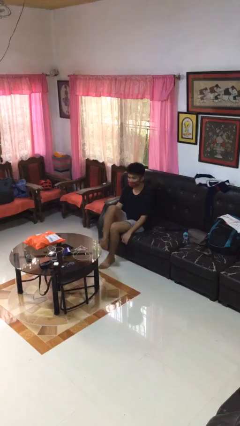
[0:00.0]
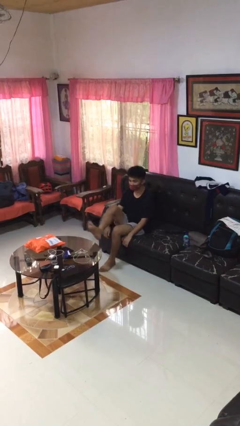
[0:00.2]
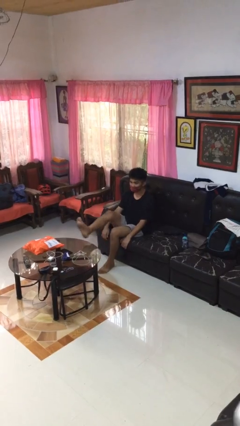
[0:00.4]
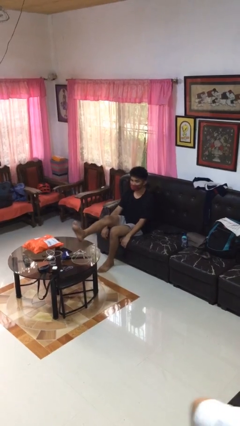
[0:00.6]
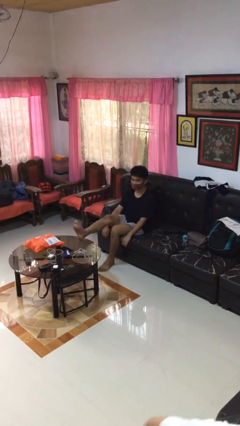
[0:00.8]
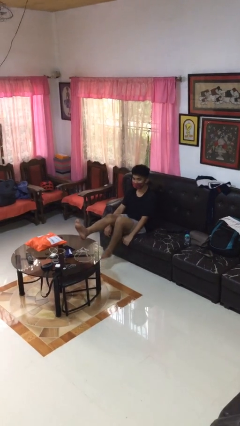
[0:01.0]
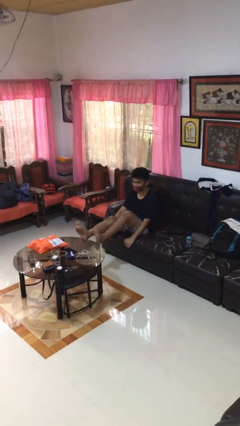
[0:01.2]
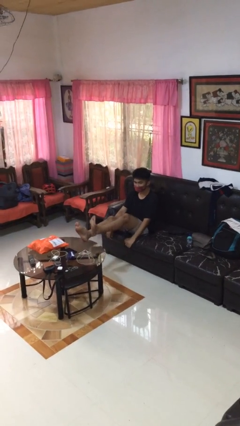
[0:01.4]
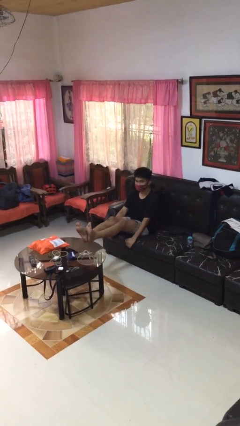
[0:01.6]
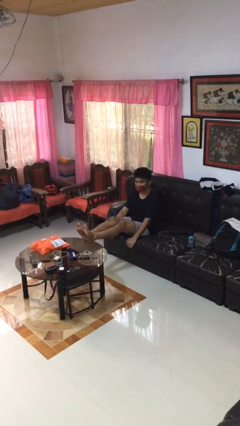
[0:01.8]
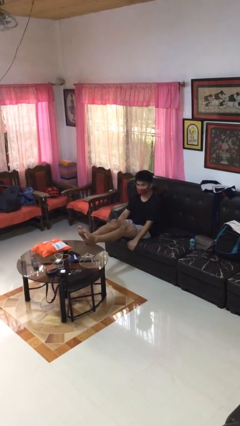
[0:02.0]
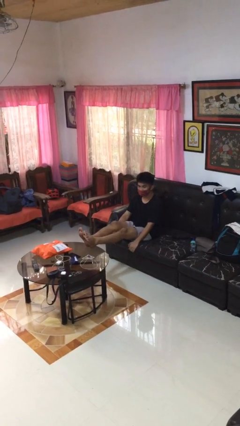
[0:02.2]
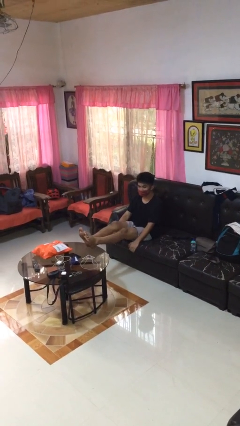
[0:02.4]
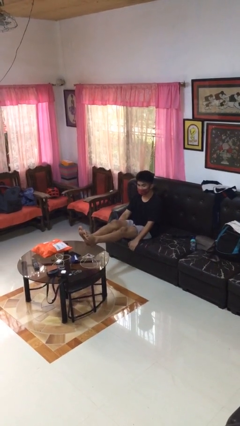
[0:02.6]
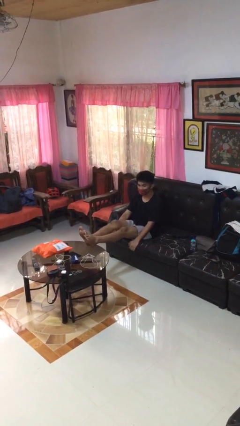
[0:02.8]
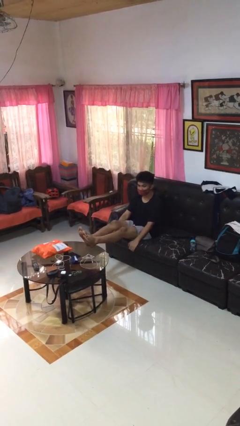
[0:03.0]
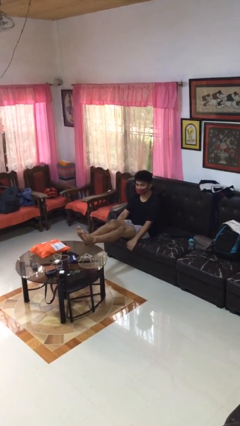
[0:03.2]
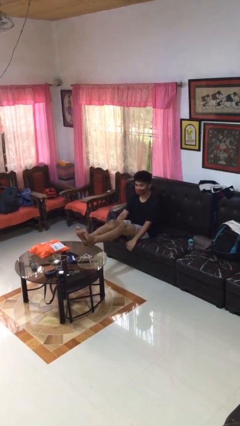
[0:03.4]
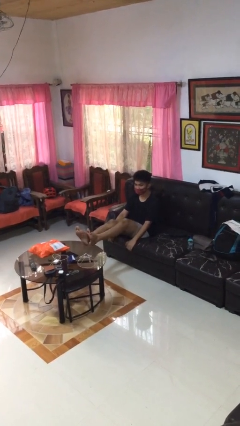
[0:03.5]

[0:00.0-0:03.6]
person puts feet up

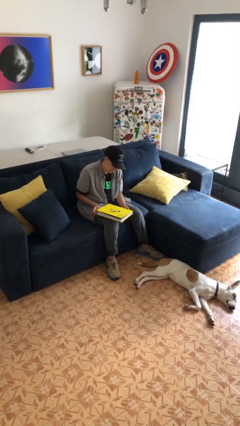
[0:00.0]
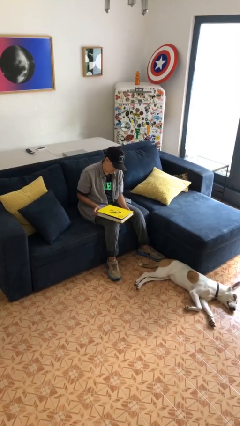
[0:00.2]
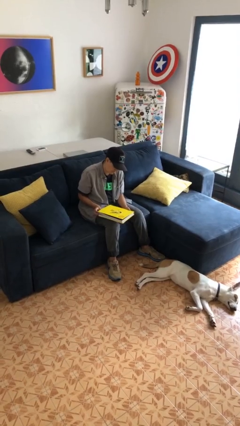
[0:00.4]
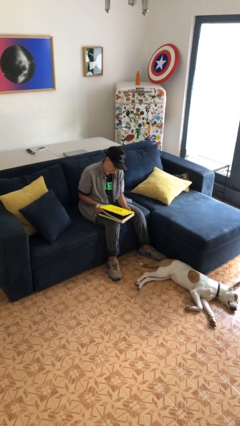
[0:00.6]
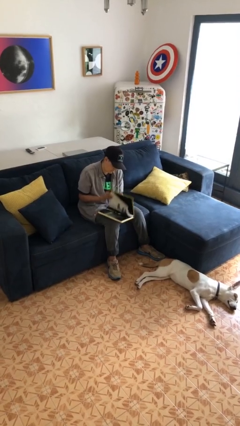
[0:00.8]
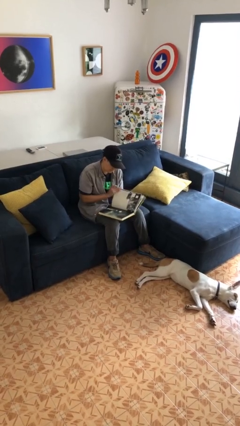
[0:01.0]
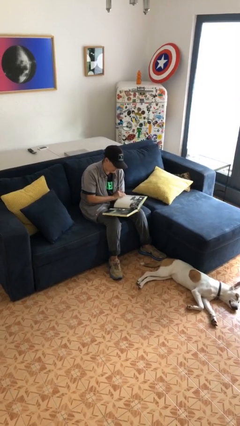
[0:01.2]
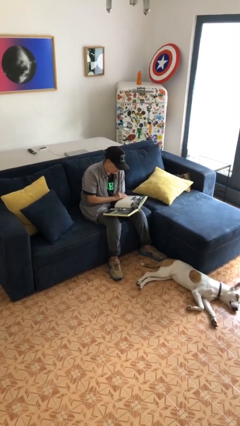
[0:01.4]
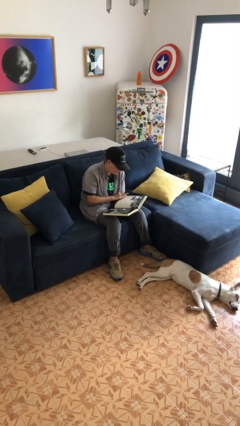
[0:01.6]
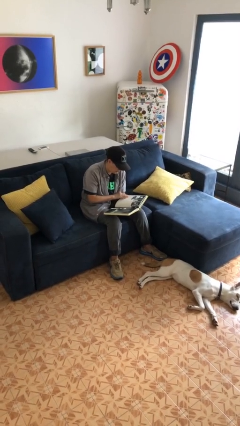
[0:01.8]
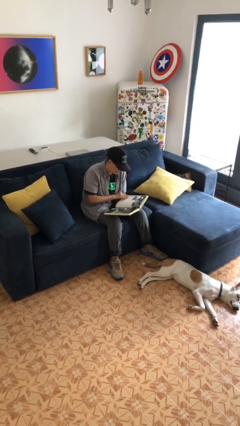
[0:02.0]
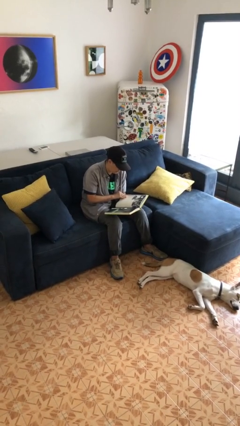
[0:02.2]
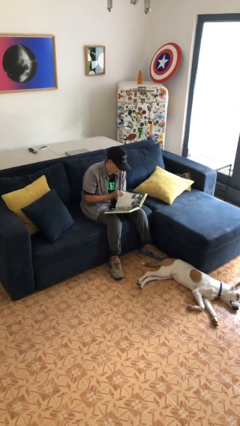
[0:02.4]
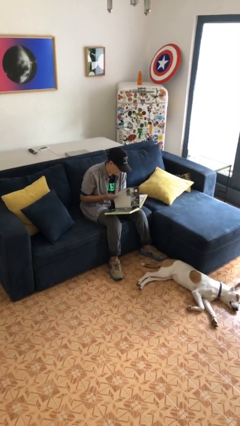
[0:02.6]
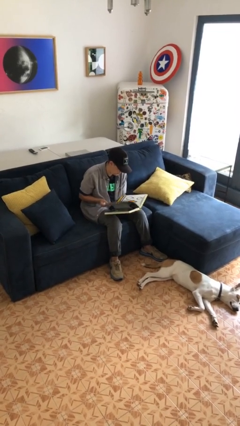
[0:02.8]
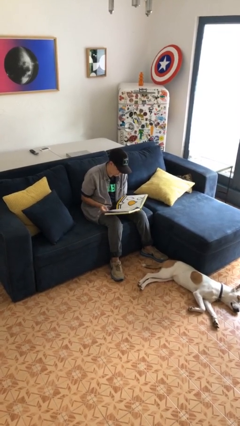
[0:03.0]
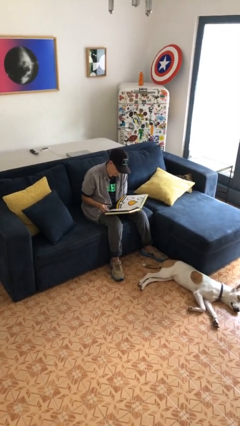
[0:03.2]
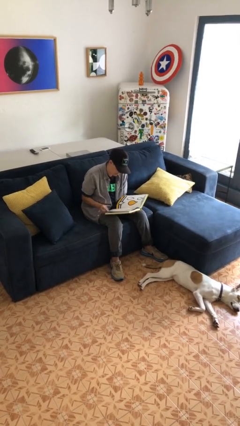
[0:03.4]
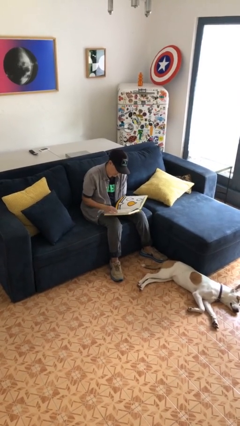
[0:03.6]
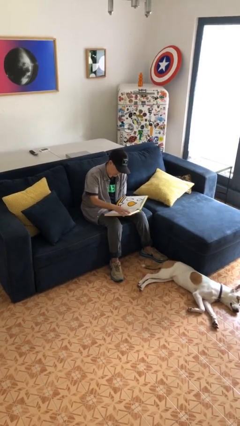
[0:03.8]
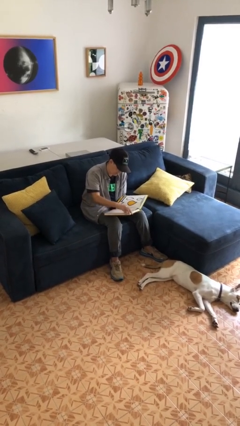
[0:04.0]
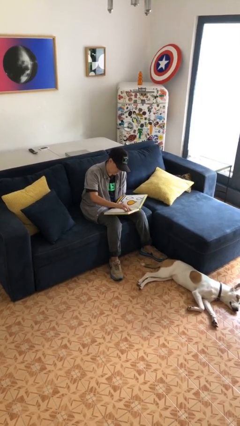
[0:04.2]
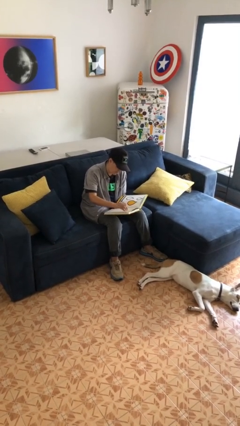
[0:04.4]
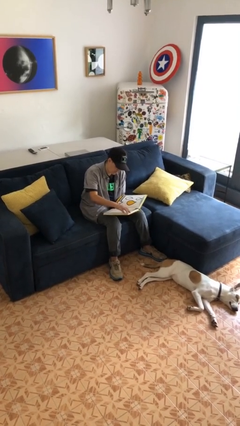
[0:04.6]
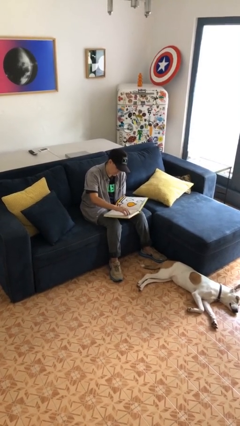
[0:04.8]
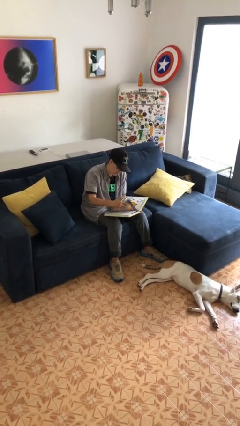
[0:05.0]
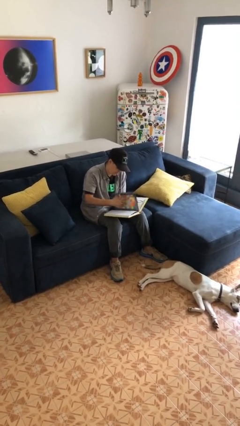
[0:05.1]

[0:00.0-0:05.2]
person reads book

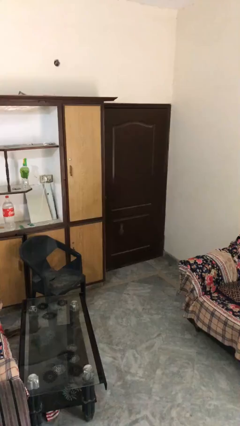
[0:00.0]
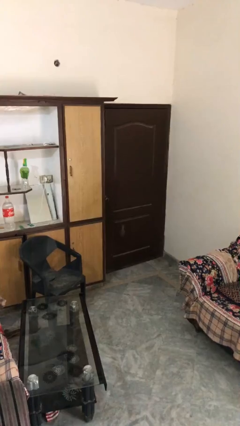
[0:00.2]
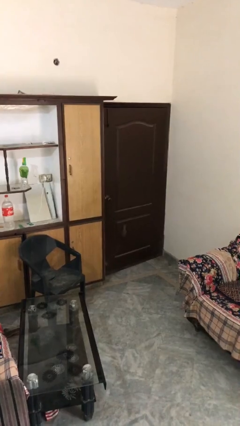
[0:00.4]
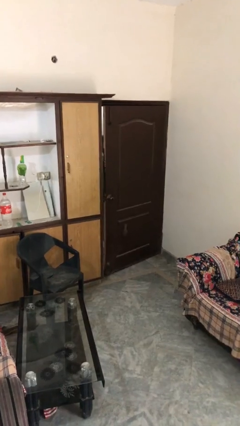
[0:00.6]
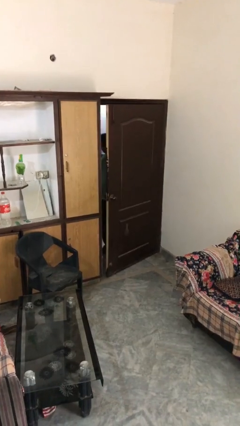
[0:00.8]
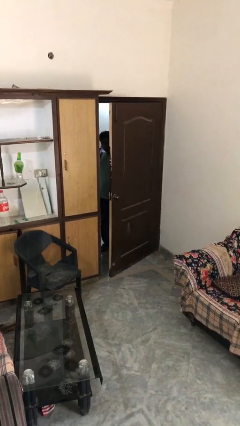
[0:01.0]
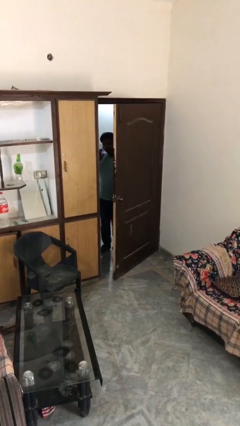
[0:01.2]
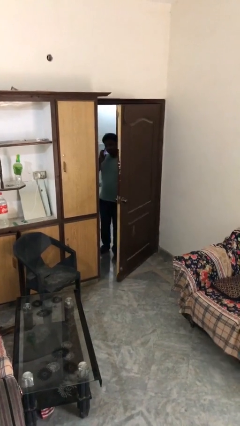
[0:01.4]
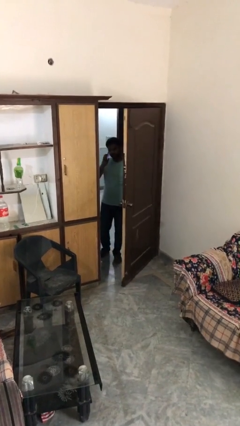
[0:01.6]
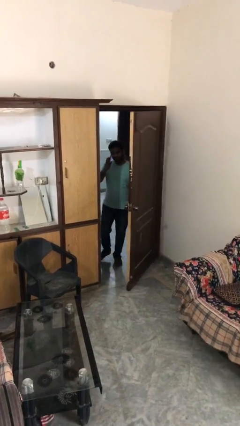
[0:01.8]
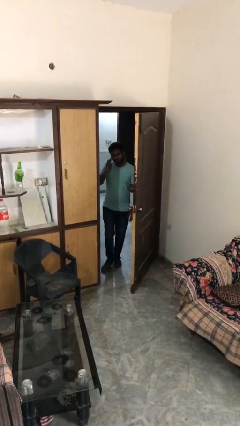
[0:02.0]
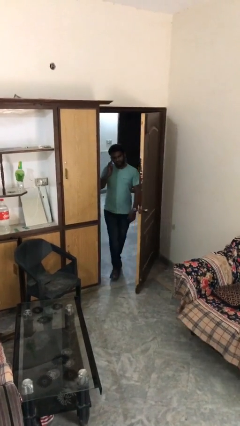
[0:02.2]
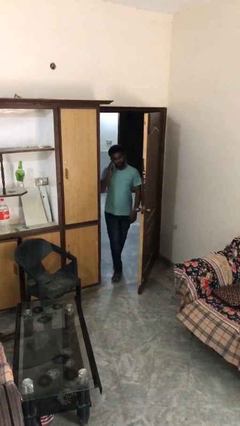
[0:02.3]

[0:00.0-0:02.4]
person opens facility door

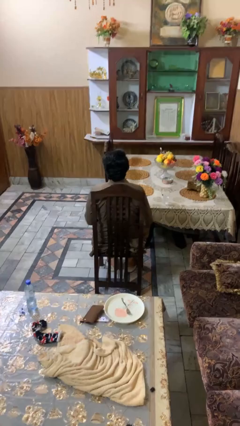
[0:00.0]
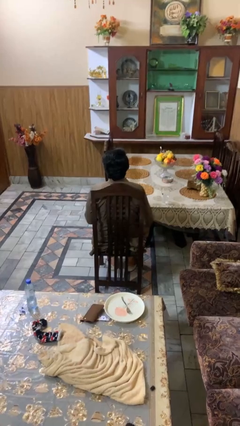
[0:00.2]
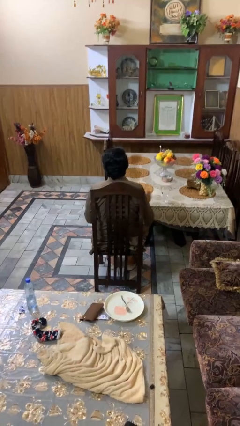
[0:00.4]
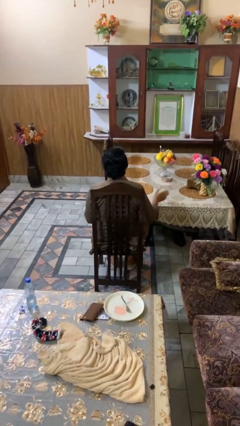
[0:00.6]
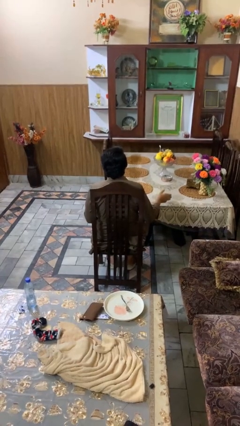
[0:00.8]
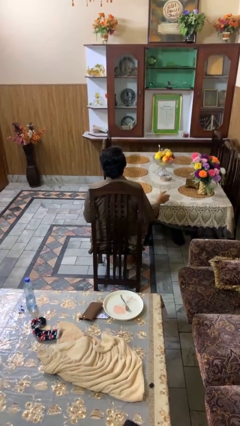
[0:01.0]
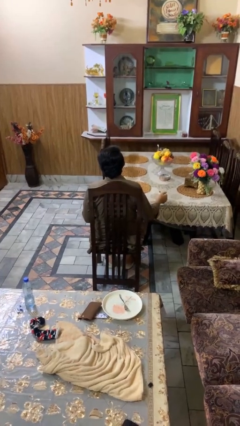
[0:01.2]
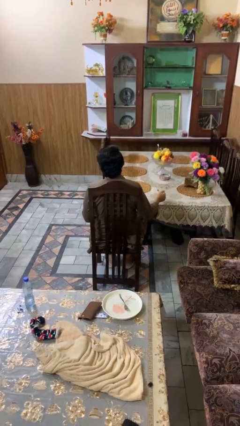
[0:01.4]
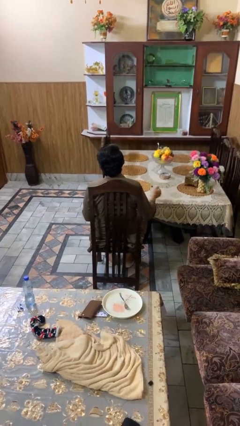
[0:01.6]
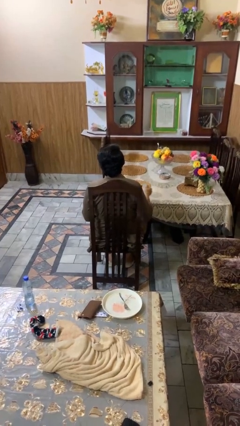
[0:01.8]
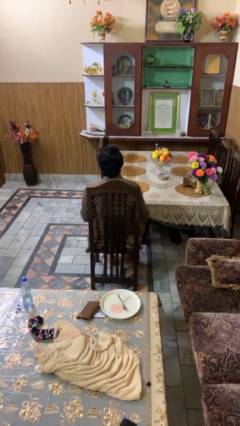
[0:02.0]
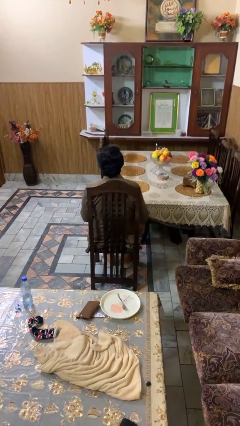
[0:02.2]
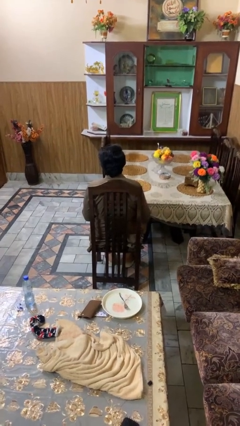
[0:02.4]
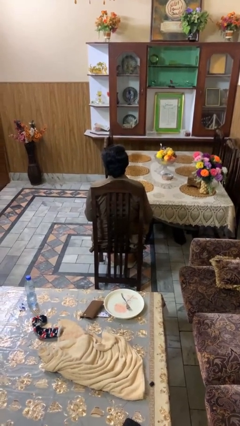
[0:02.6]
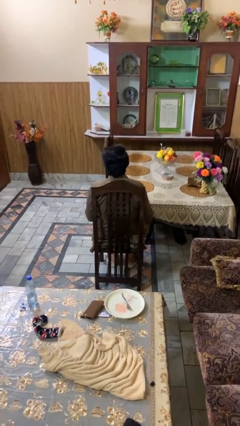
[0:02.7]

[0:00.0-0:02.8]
person picks up object from table

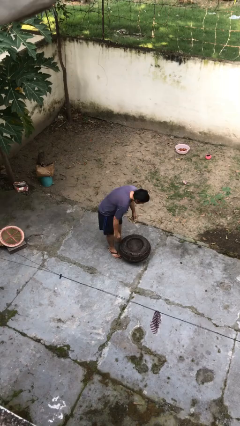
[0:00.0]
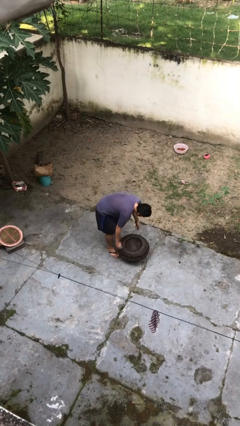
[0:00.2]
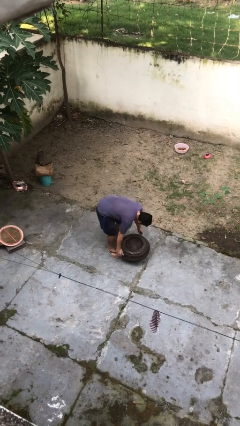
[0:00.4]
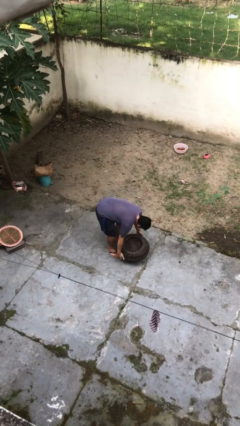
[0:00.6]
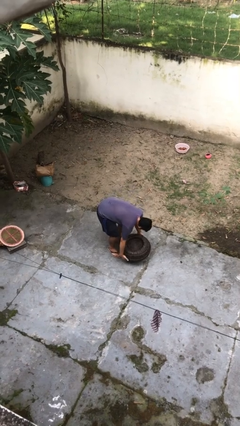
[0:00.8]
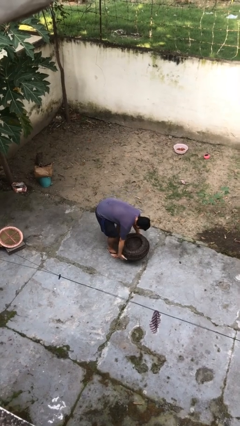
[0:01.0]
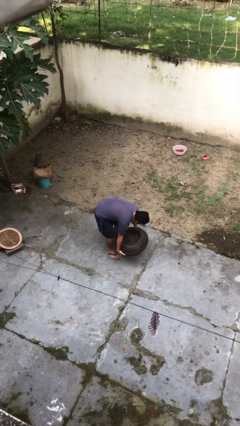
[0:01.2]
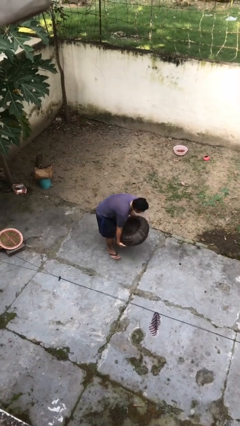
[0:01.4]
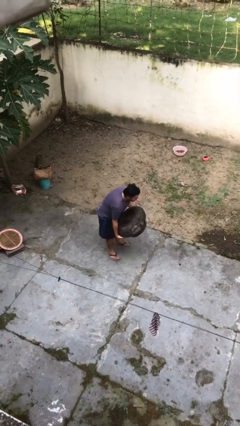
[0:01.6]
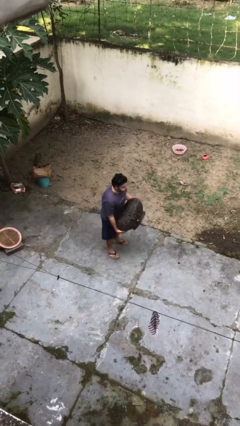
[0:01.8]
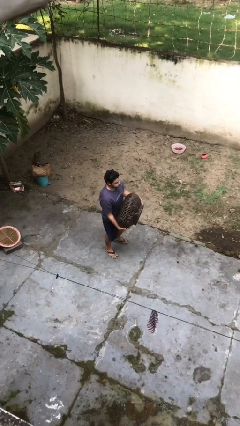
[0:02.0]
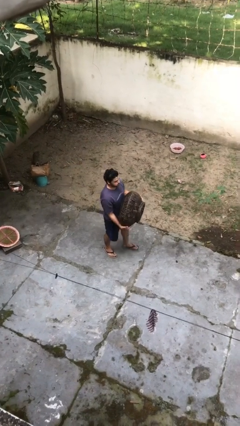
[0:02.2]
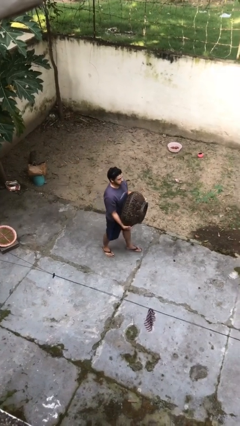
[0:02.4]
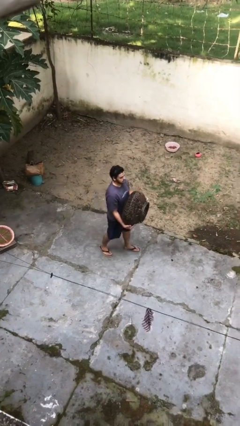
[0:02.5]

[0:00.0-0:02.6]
person picks up object from floor

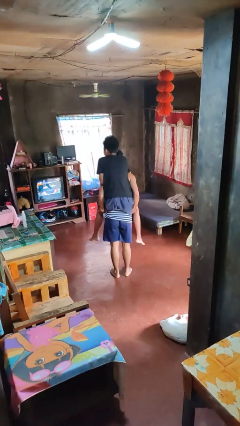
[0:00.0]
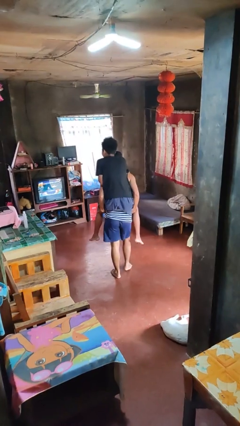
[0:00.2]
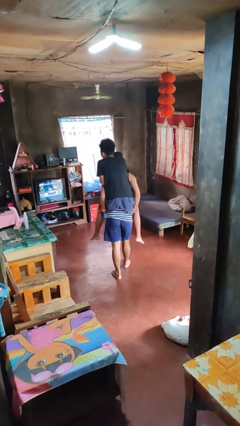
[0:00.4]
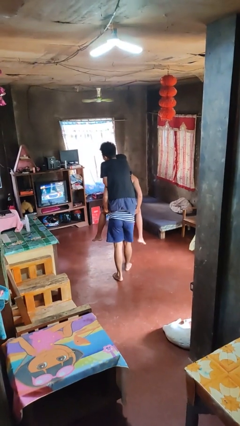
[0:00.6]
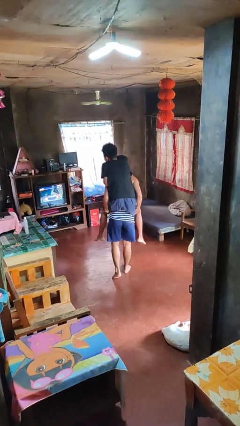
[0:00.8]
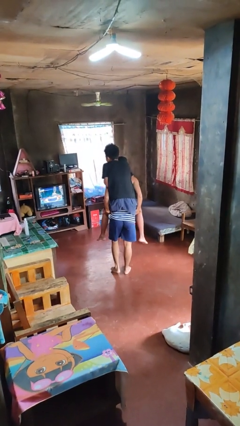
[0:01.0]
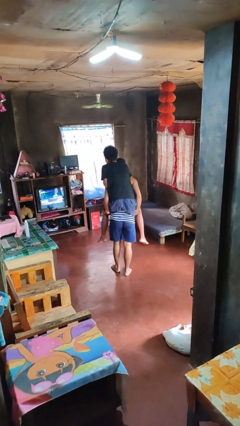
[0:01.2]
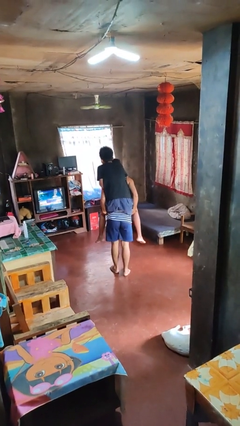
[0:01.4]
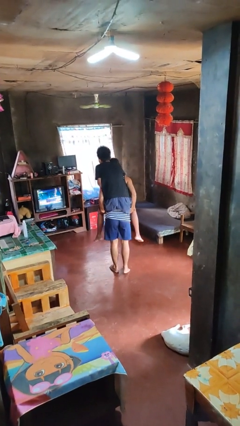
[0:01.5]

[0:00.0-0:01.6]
person carries person on back
